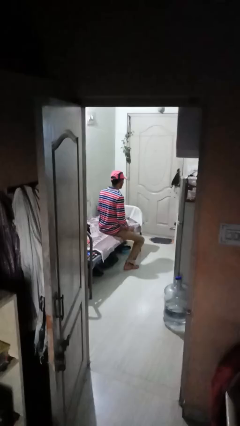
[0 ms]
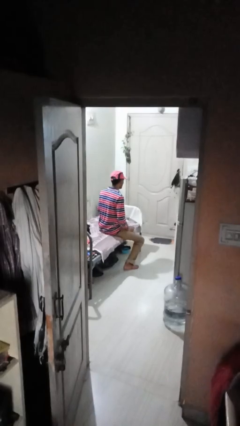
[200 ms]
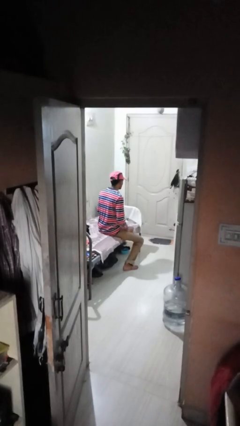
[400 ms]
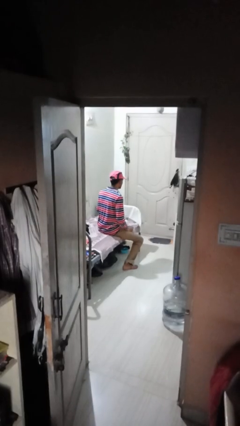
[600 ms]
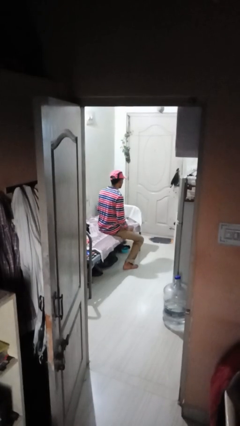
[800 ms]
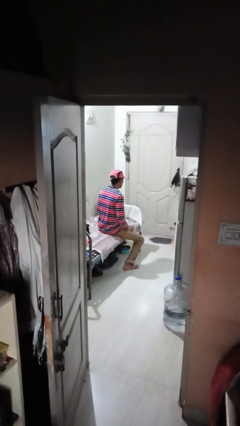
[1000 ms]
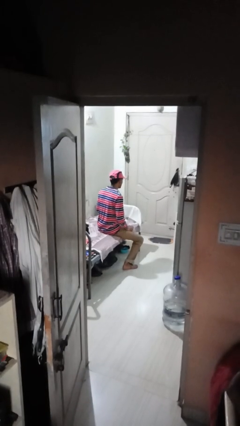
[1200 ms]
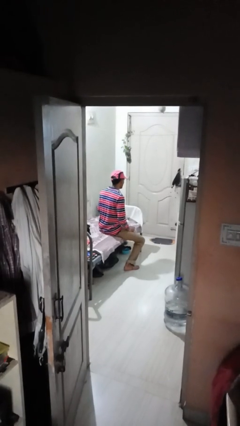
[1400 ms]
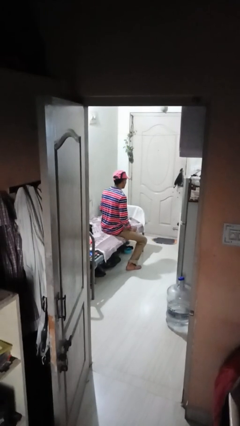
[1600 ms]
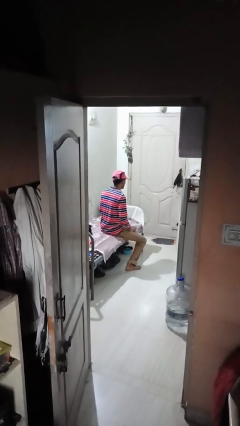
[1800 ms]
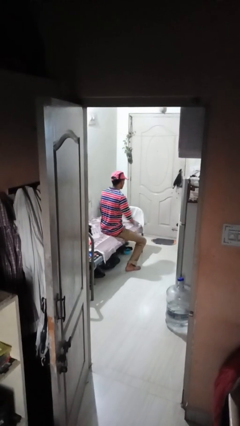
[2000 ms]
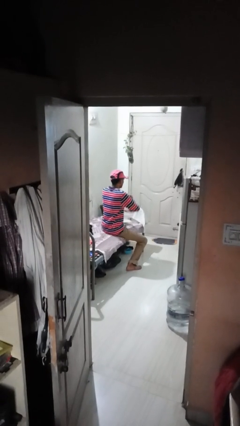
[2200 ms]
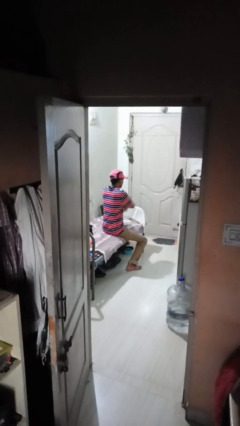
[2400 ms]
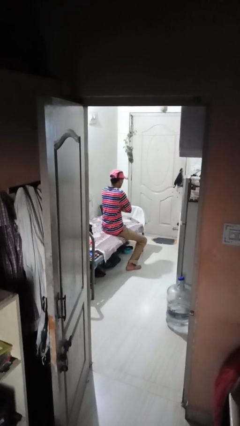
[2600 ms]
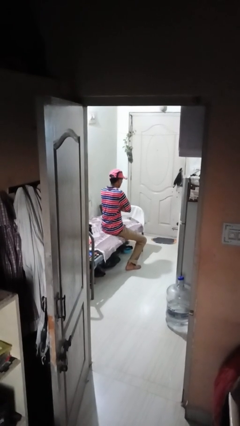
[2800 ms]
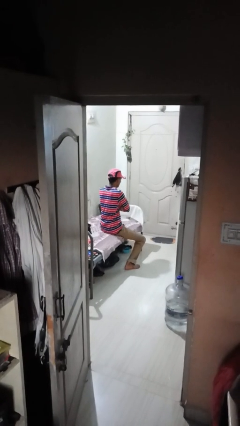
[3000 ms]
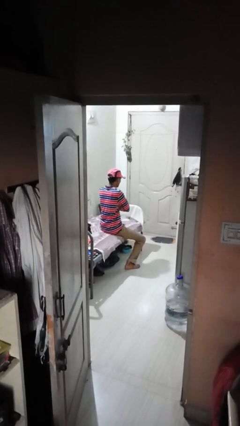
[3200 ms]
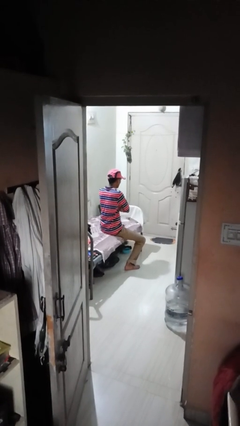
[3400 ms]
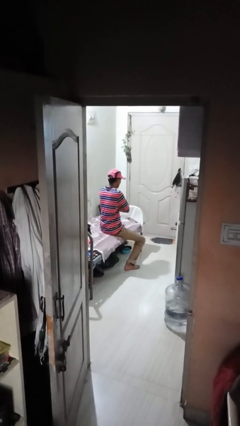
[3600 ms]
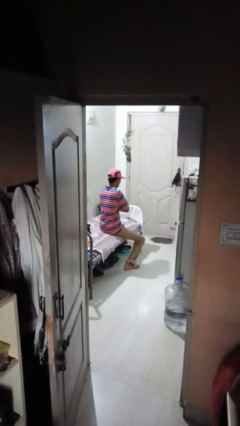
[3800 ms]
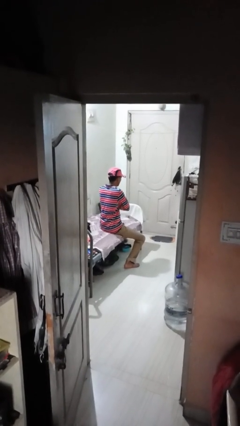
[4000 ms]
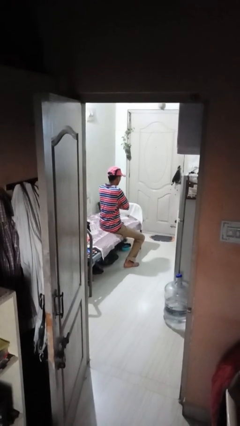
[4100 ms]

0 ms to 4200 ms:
person crosses arms

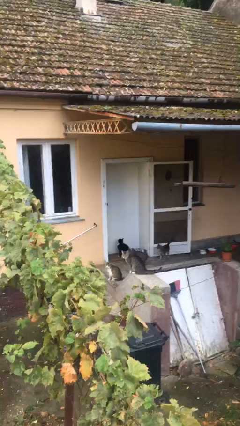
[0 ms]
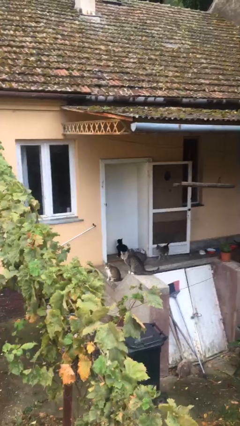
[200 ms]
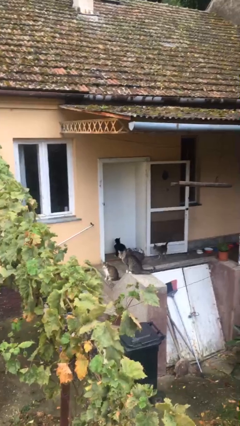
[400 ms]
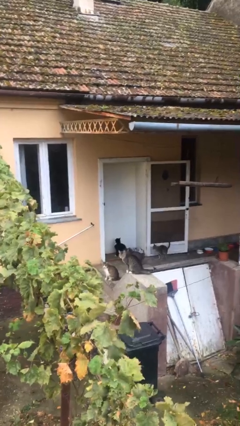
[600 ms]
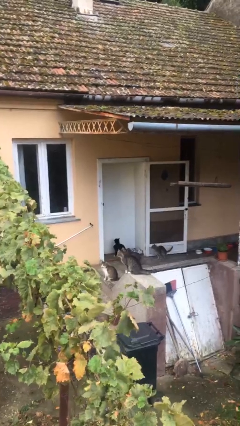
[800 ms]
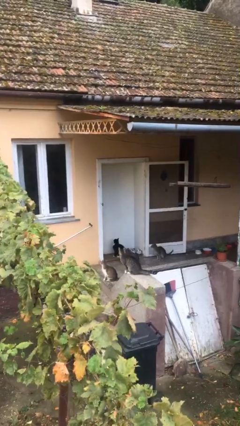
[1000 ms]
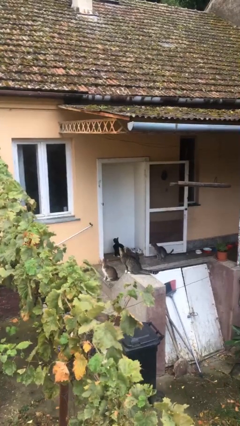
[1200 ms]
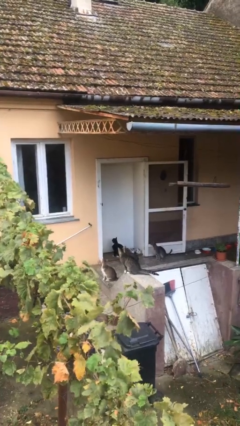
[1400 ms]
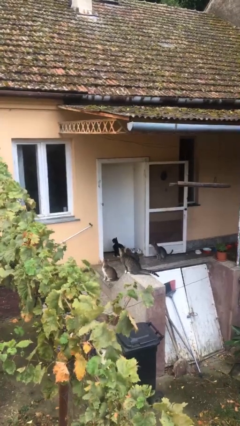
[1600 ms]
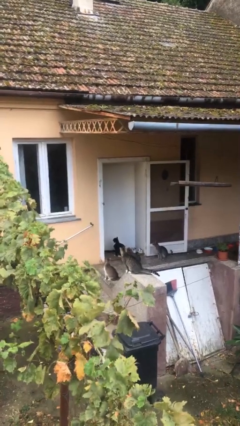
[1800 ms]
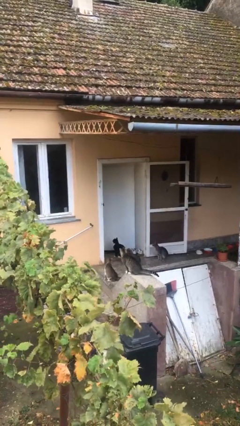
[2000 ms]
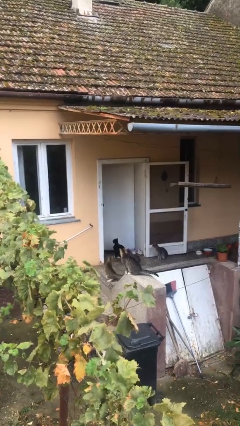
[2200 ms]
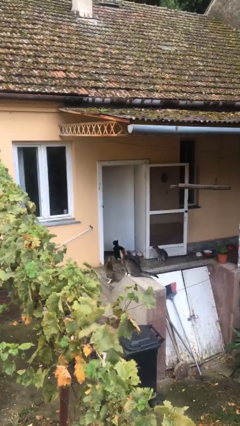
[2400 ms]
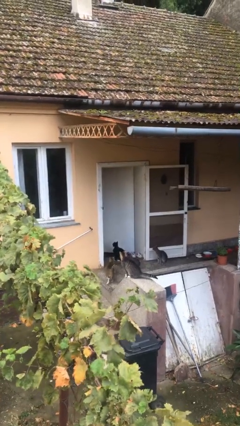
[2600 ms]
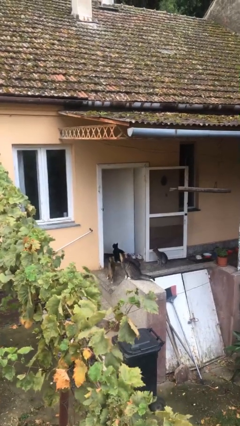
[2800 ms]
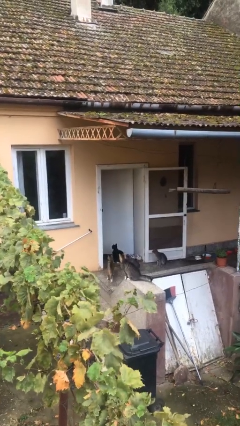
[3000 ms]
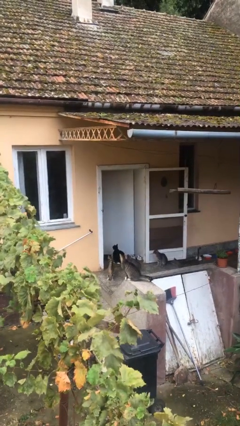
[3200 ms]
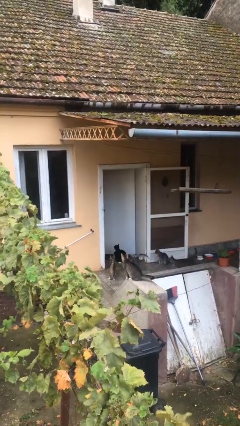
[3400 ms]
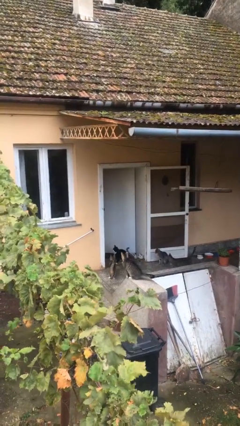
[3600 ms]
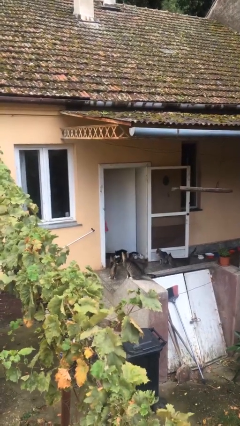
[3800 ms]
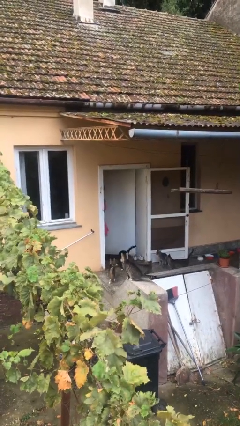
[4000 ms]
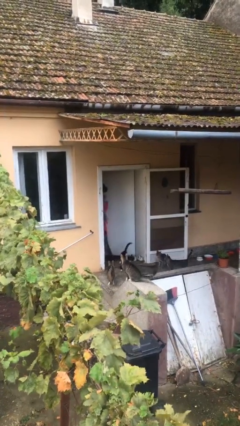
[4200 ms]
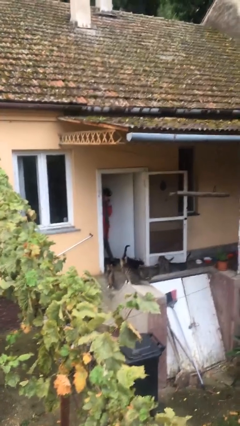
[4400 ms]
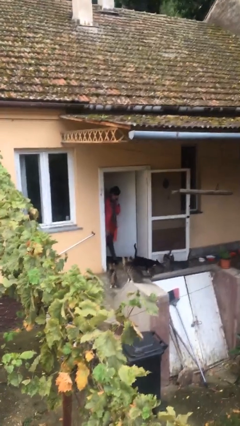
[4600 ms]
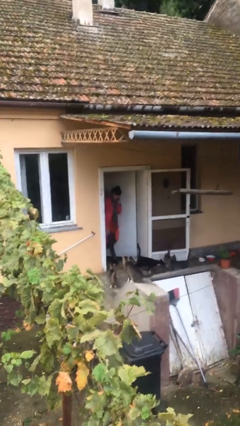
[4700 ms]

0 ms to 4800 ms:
person opens facility door

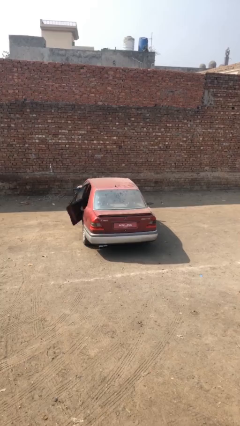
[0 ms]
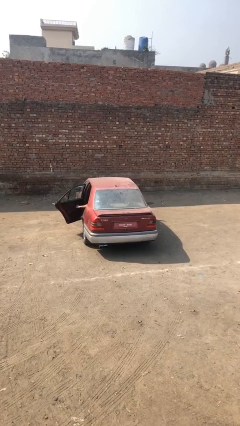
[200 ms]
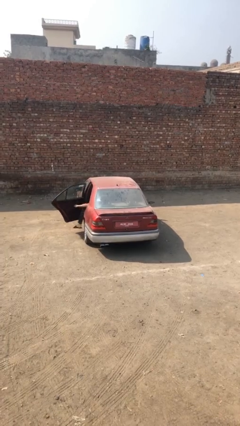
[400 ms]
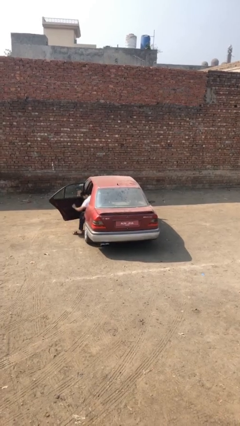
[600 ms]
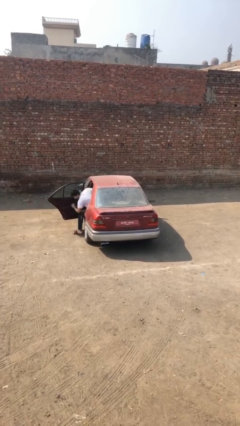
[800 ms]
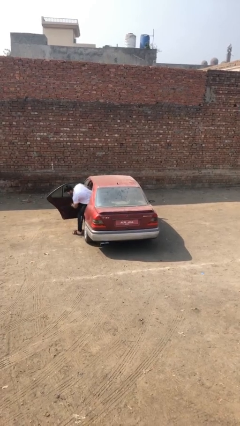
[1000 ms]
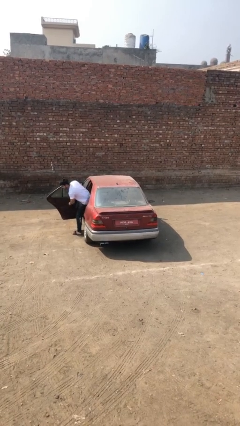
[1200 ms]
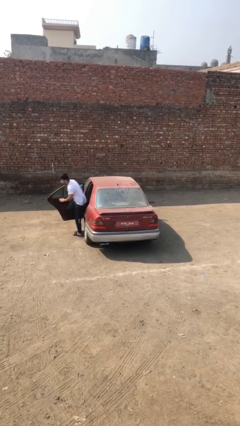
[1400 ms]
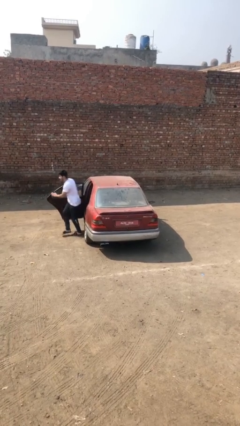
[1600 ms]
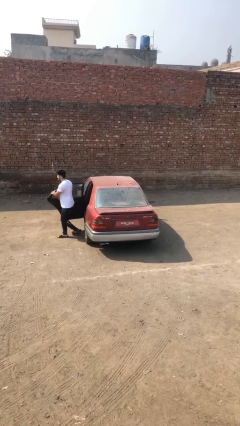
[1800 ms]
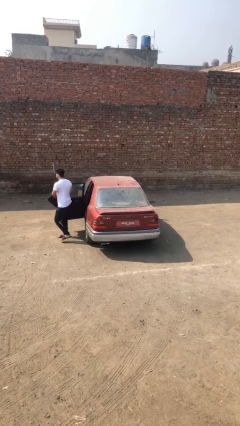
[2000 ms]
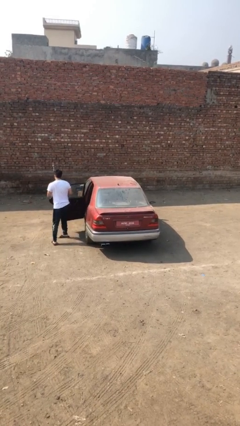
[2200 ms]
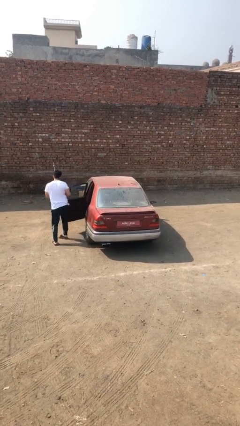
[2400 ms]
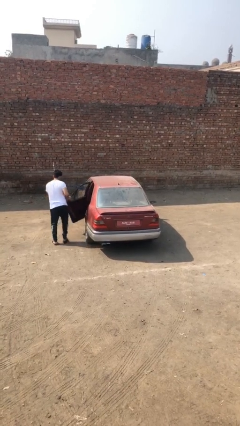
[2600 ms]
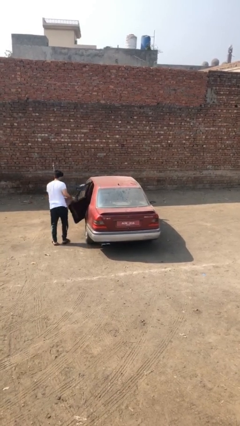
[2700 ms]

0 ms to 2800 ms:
car drops off person

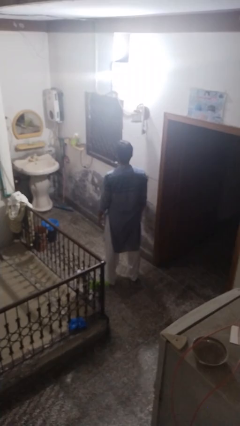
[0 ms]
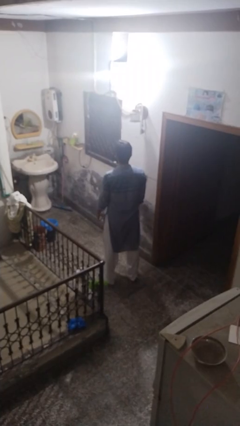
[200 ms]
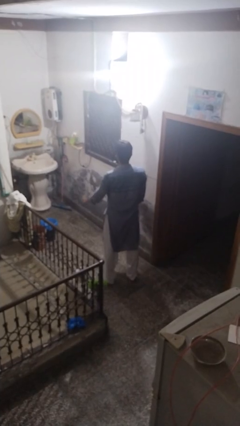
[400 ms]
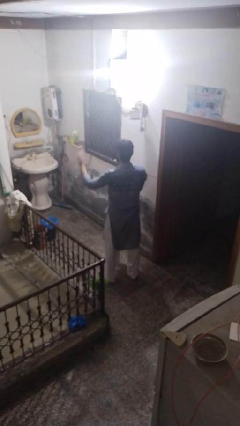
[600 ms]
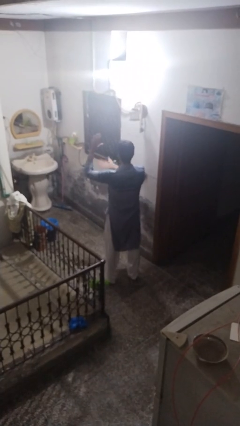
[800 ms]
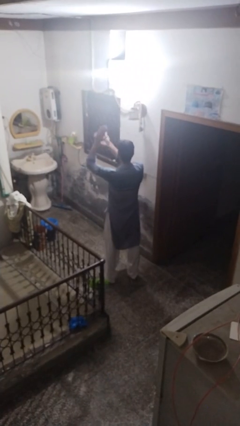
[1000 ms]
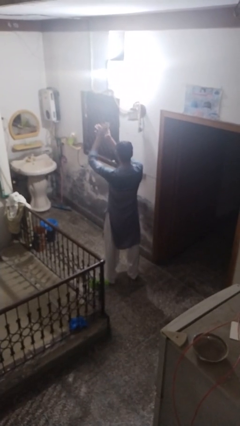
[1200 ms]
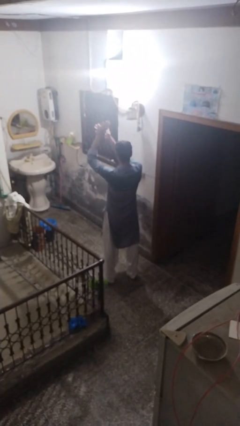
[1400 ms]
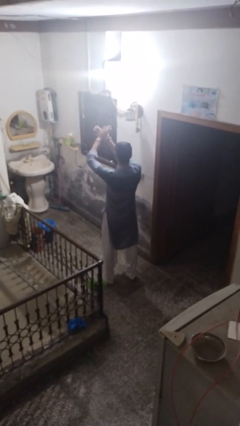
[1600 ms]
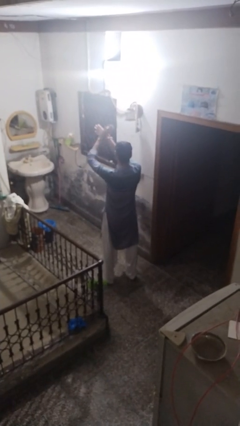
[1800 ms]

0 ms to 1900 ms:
person claps hands

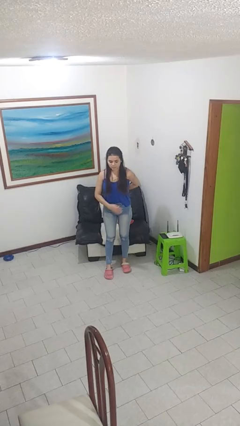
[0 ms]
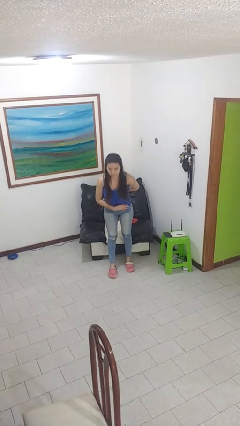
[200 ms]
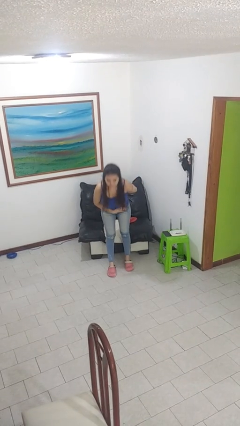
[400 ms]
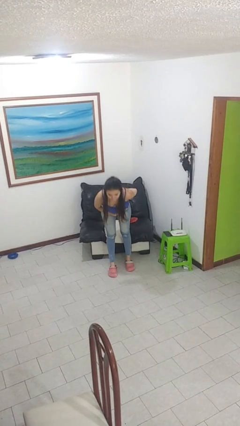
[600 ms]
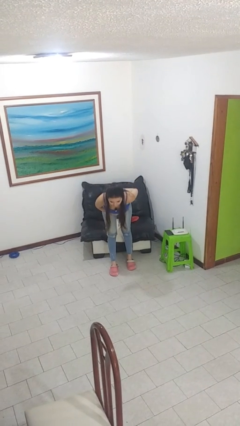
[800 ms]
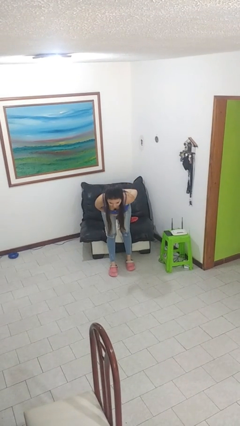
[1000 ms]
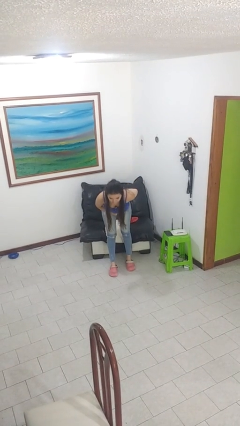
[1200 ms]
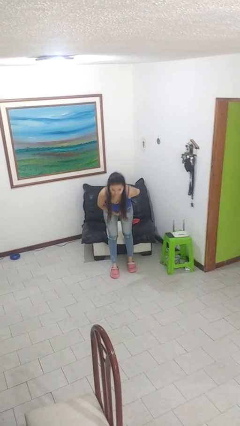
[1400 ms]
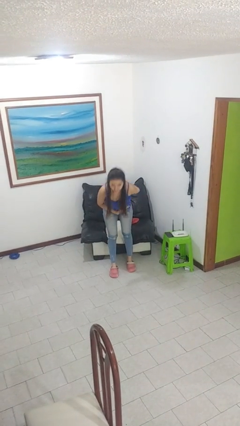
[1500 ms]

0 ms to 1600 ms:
person bows

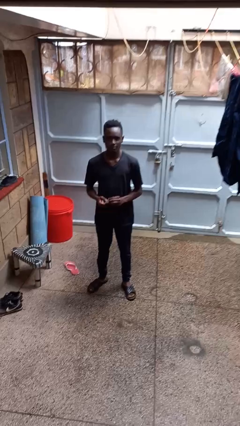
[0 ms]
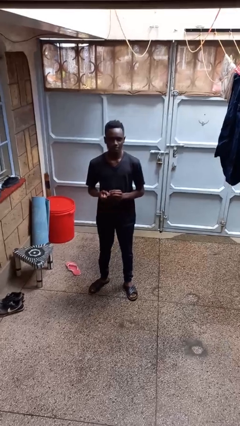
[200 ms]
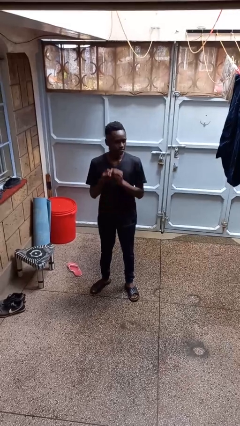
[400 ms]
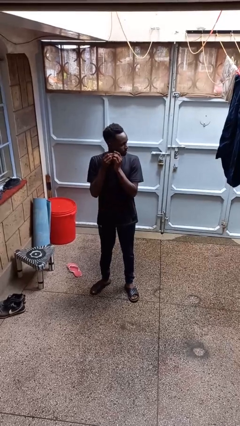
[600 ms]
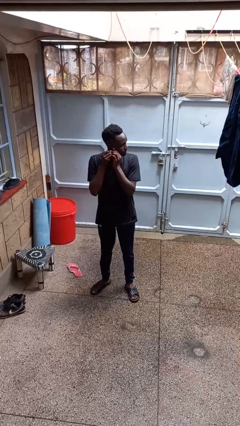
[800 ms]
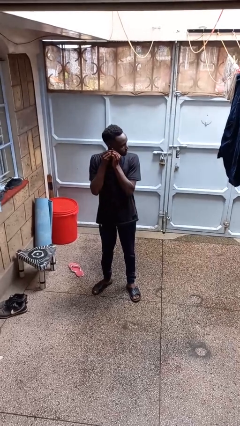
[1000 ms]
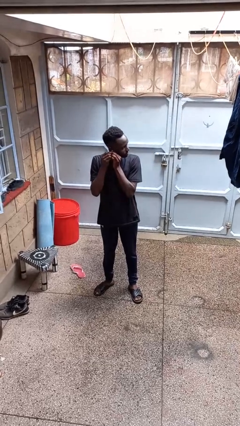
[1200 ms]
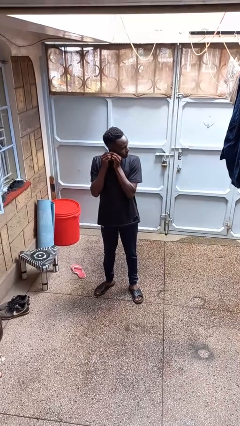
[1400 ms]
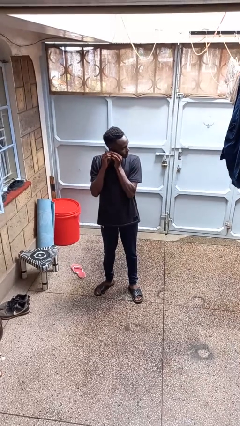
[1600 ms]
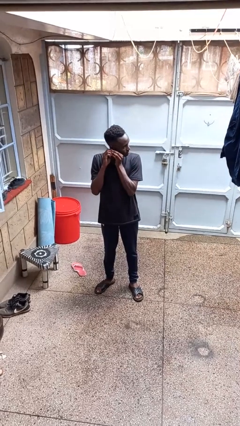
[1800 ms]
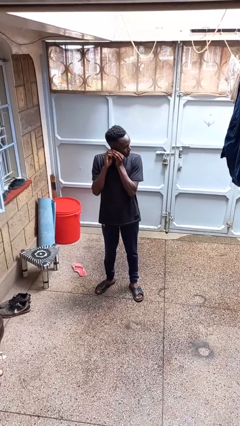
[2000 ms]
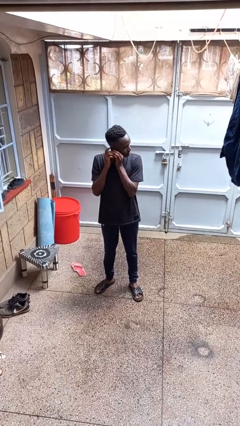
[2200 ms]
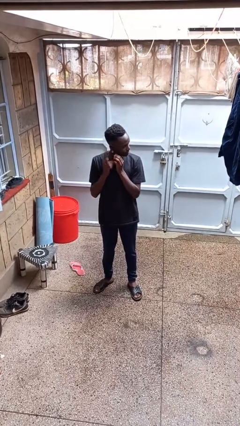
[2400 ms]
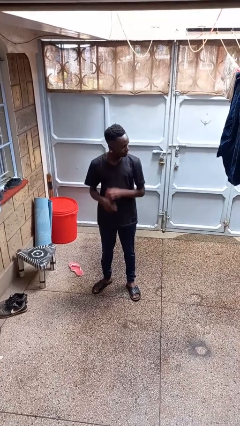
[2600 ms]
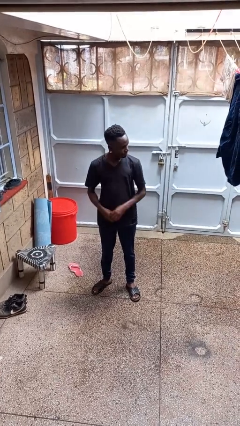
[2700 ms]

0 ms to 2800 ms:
person puts on earrings
